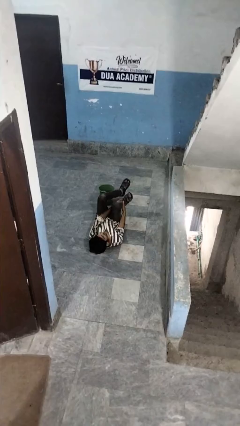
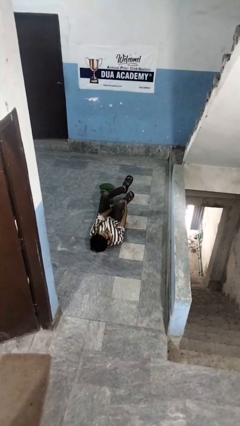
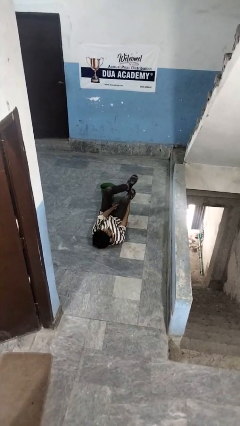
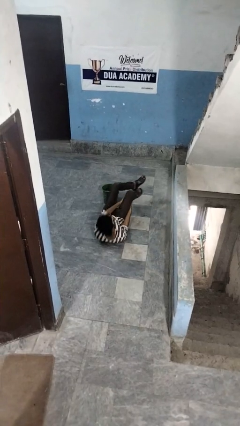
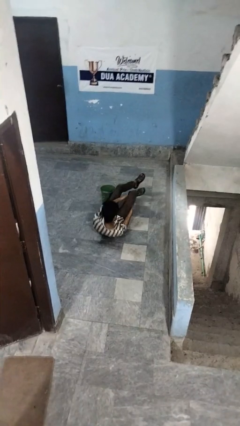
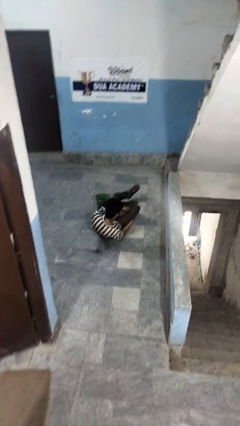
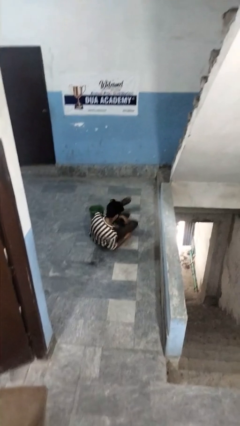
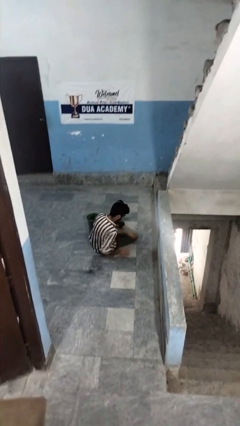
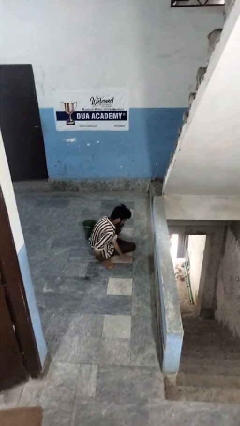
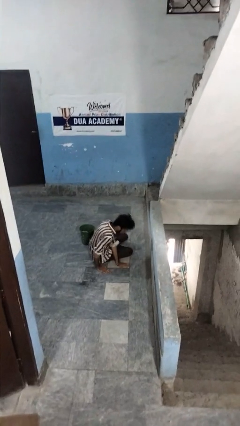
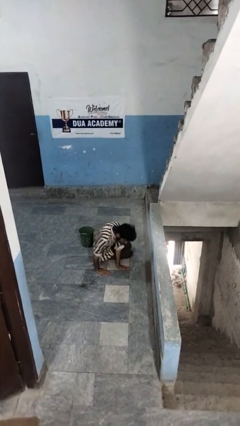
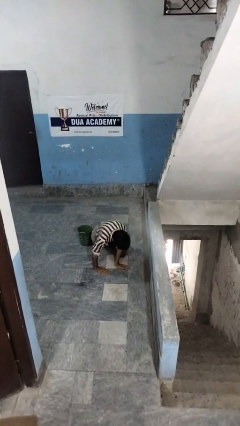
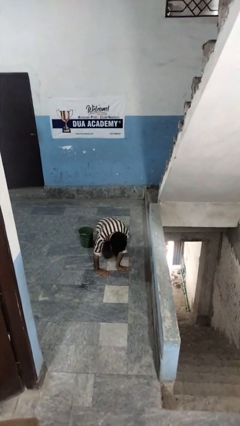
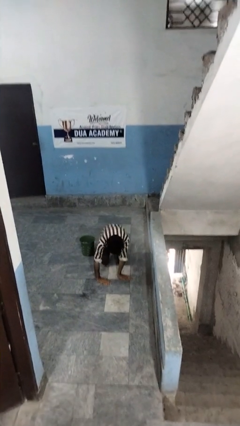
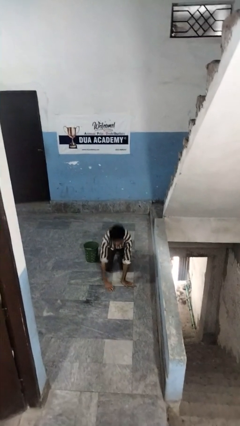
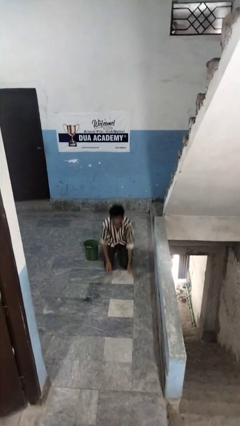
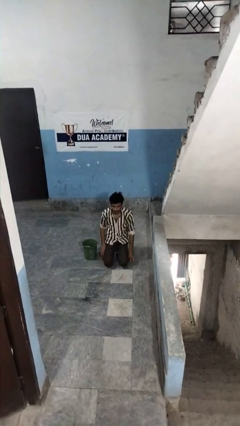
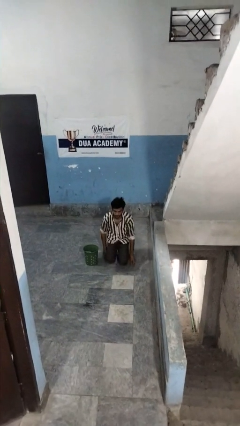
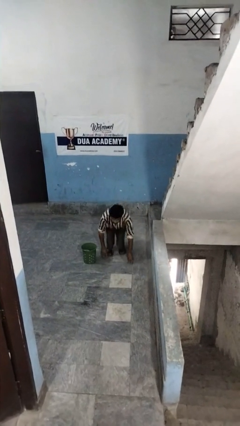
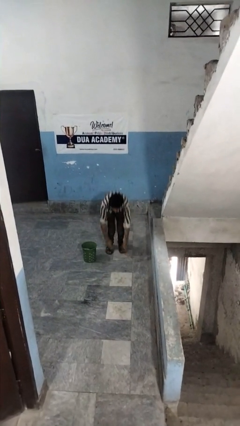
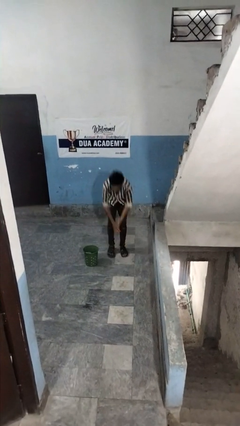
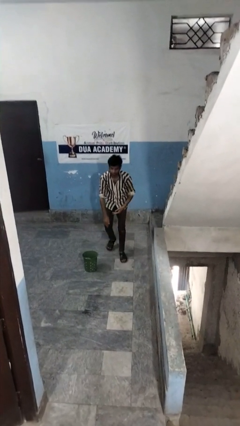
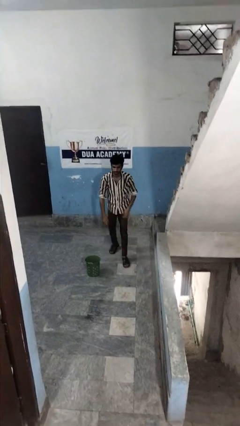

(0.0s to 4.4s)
person stands up from floor

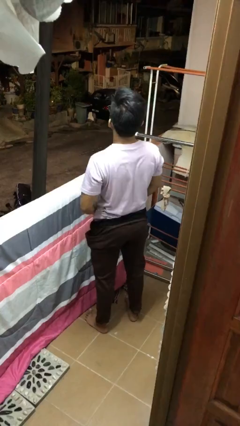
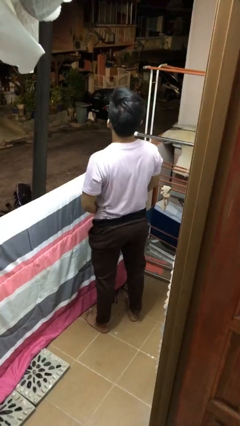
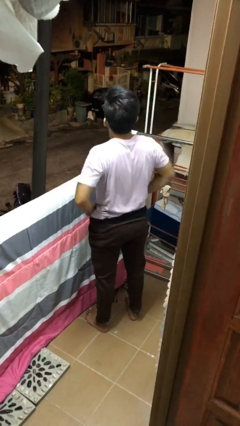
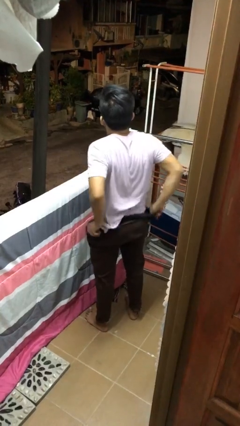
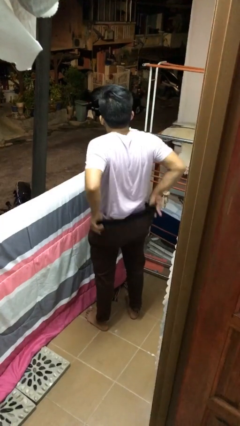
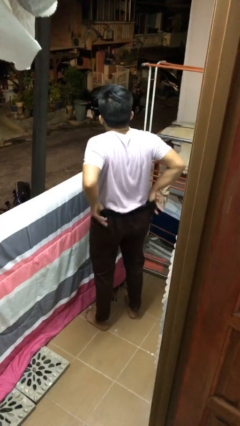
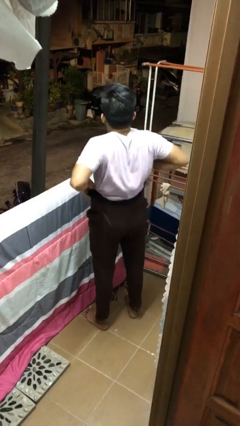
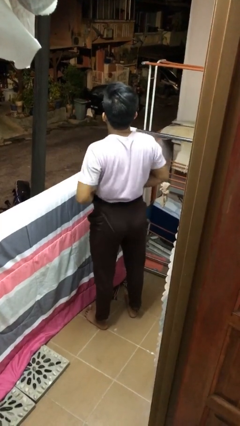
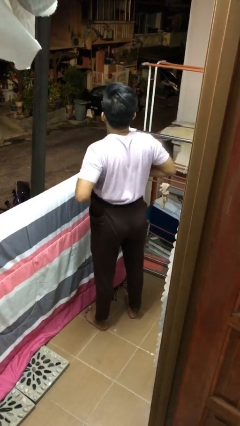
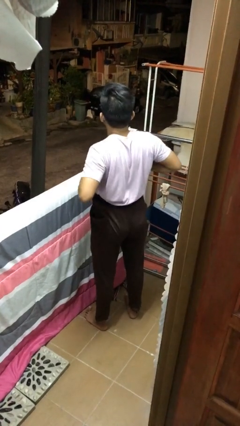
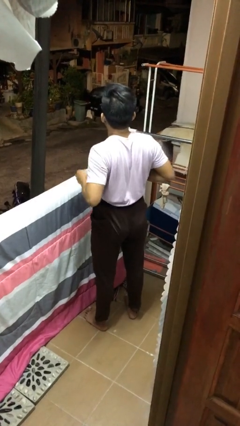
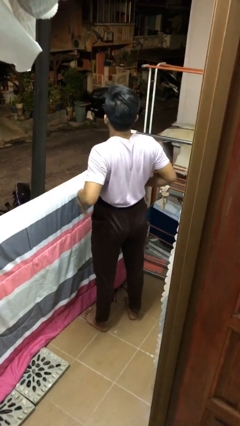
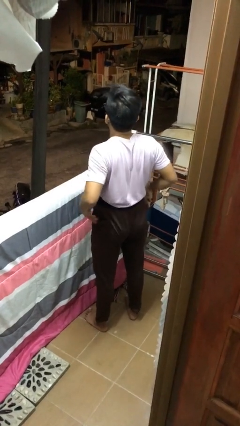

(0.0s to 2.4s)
person hikes up pants

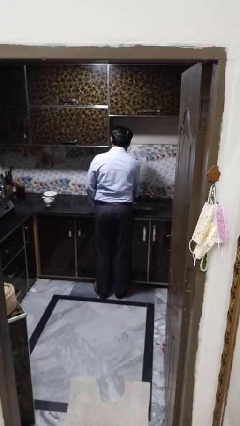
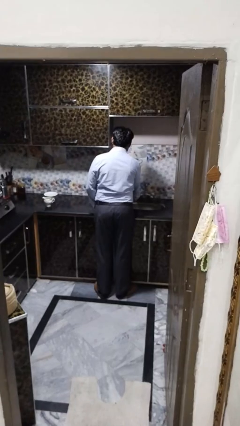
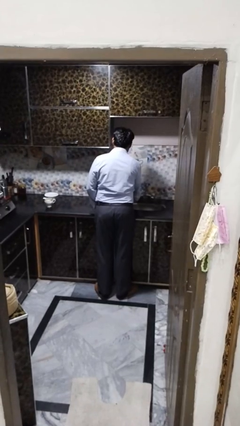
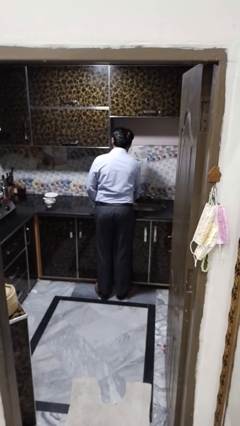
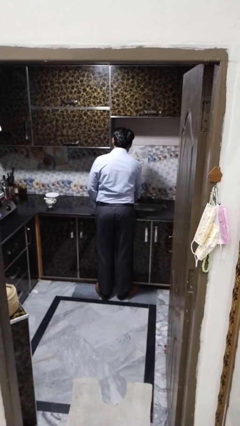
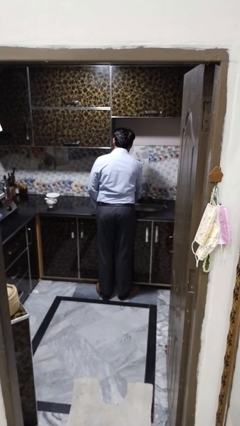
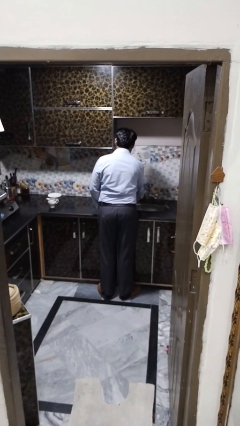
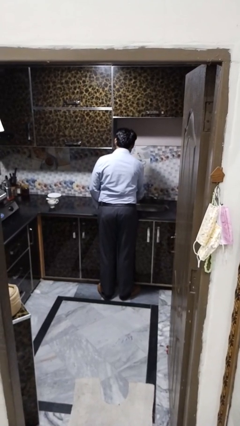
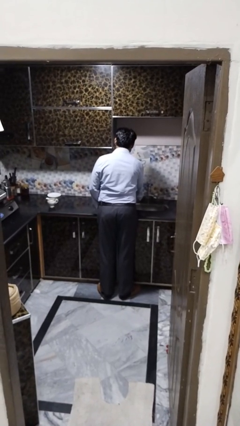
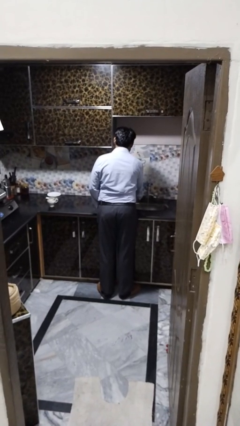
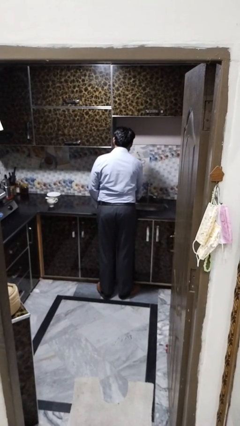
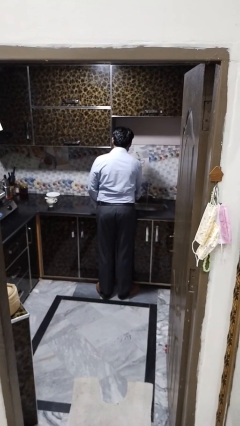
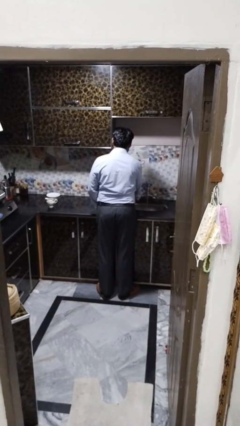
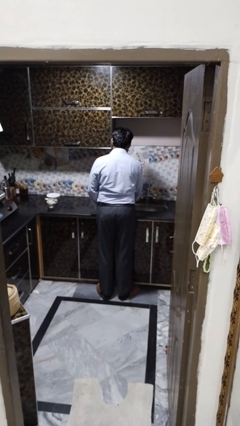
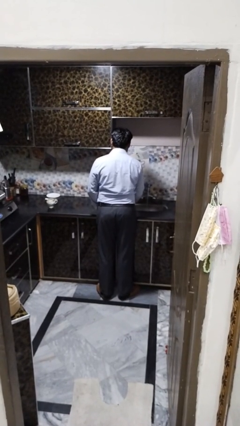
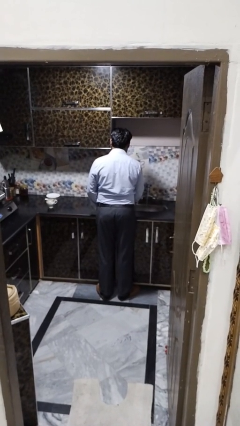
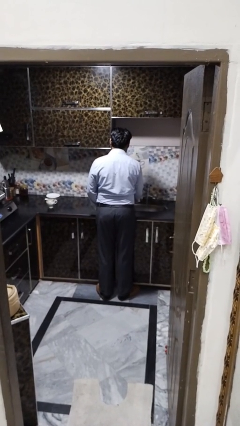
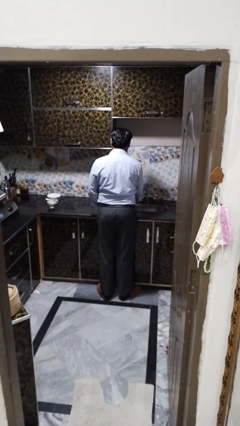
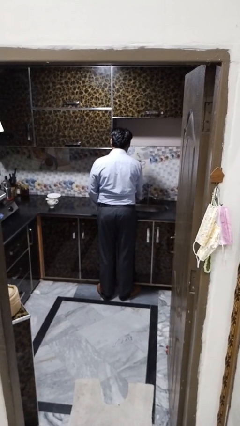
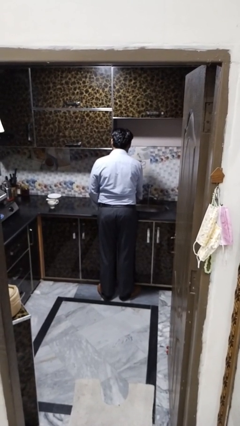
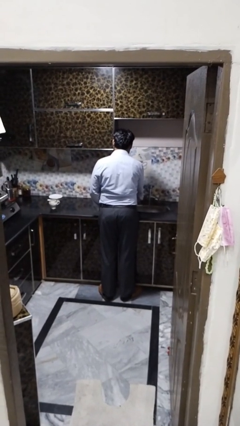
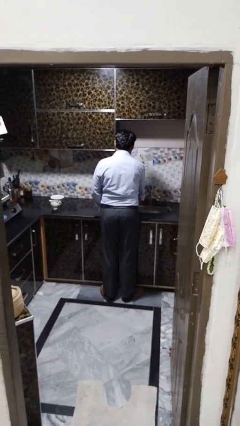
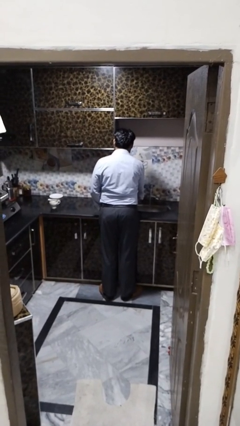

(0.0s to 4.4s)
person turns on faucet

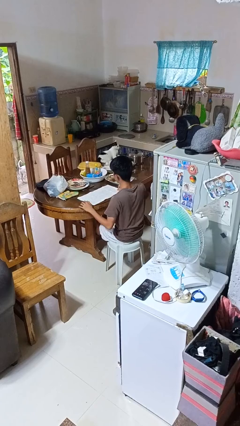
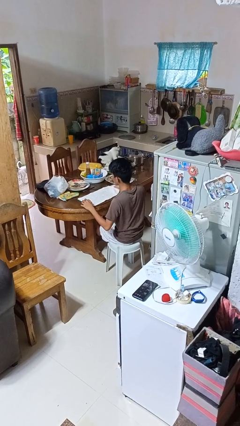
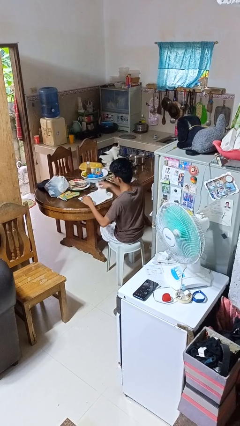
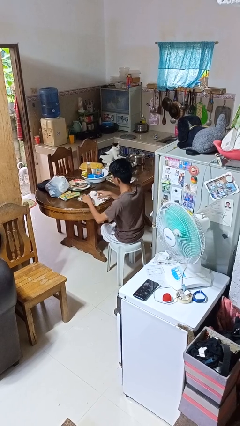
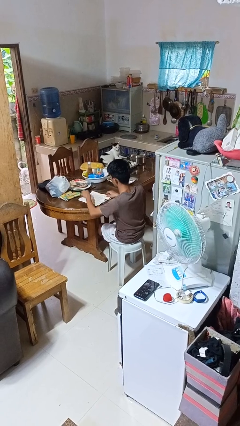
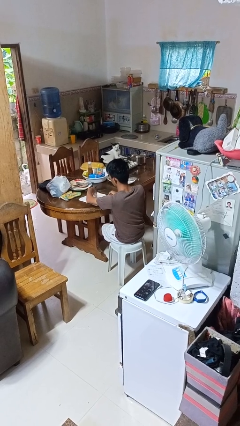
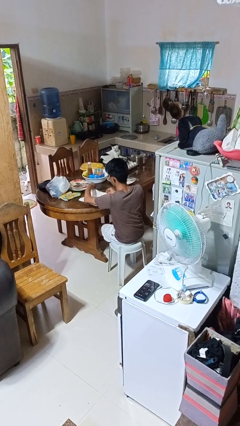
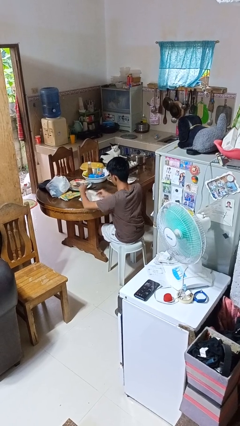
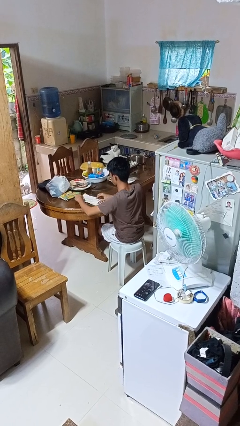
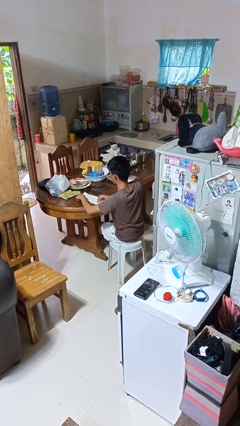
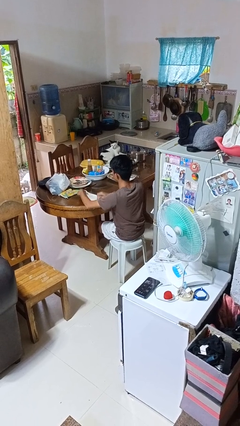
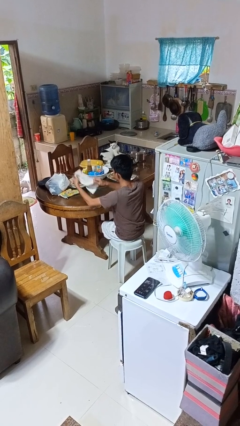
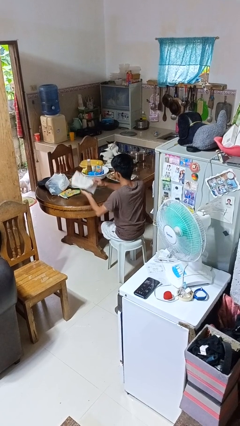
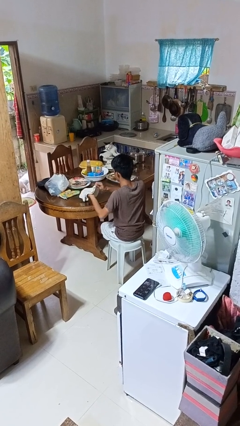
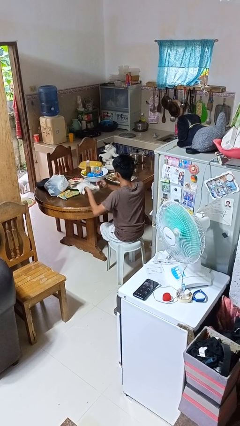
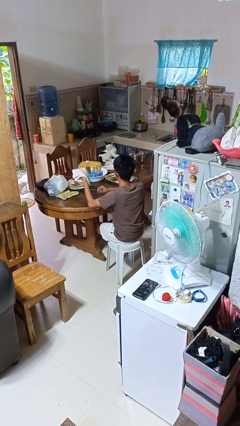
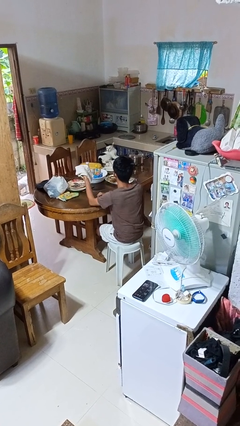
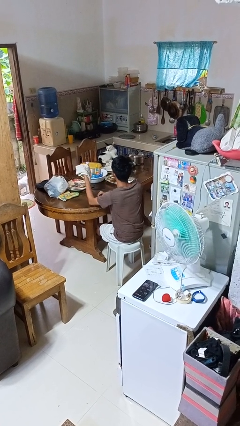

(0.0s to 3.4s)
person folds tablecloth

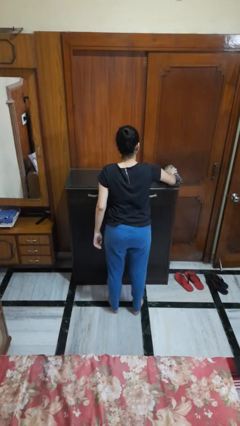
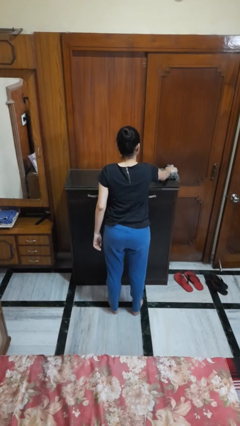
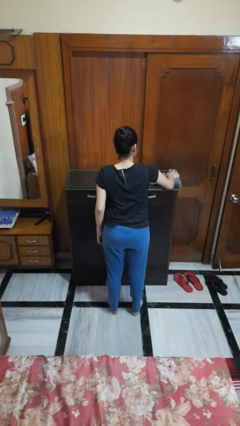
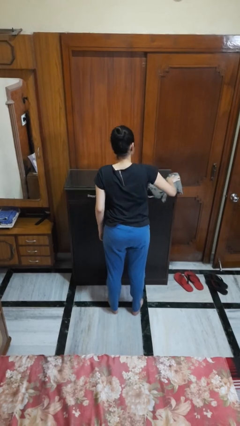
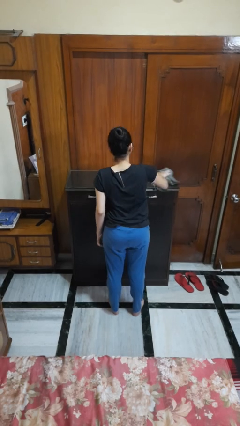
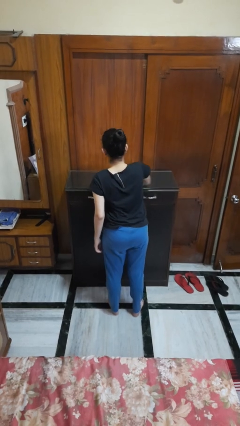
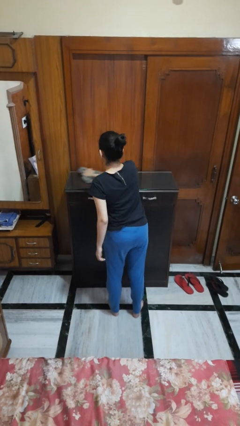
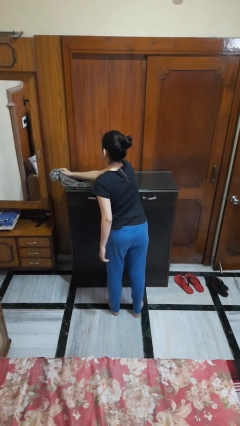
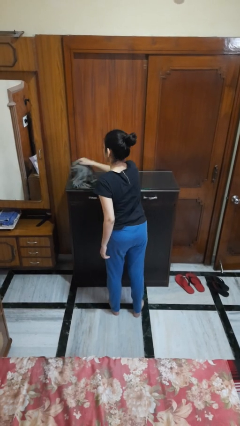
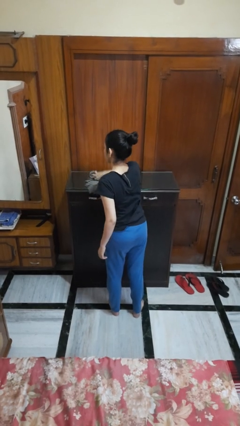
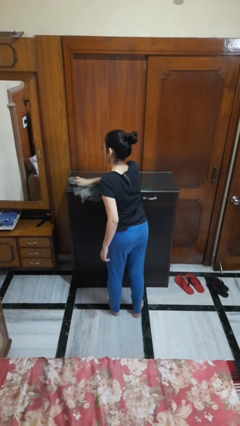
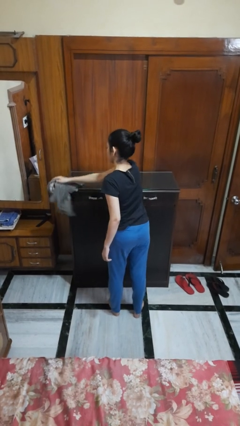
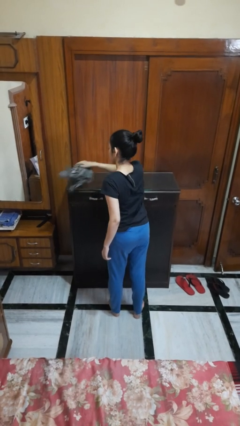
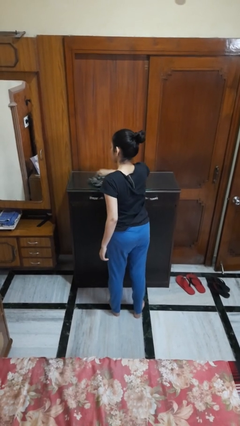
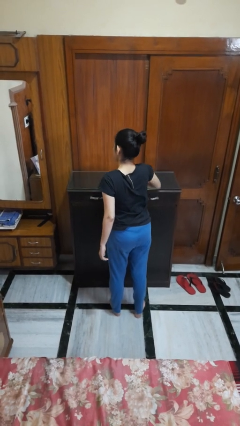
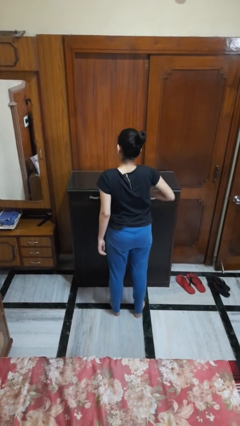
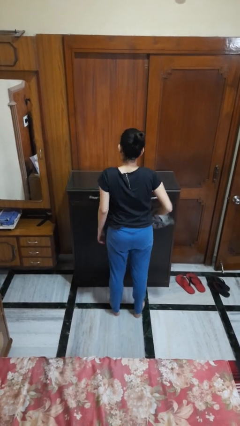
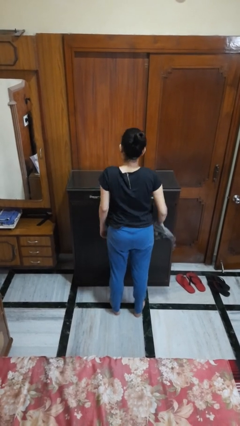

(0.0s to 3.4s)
person cleans table with rag
